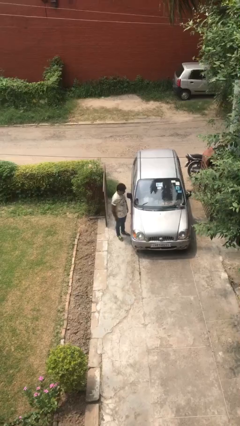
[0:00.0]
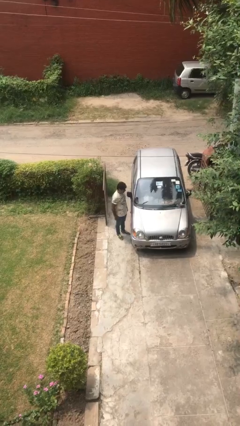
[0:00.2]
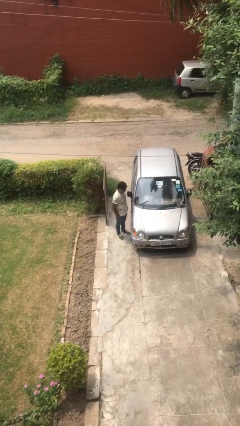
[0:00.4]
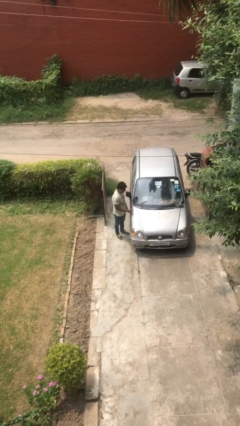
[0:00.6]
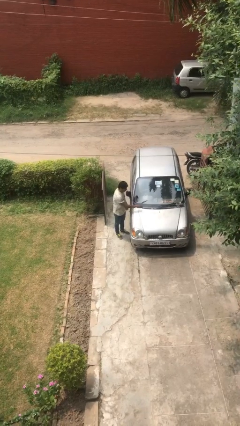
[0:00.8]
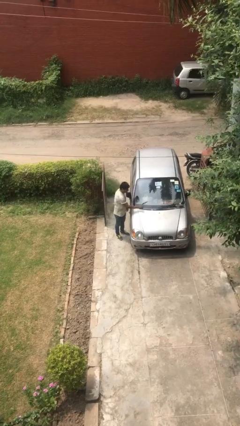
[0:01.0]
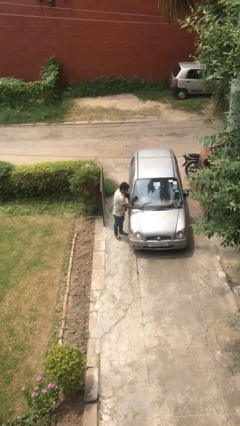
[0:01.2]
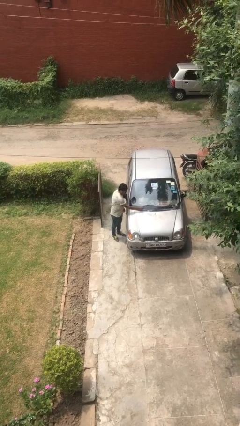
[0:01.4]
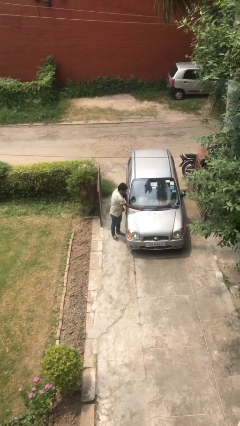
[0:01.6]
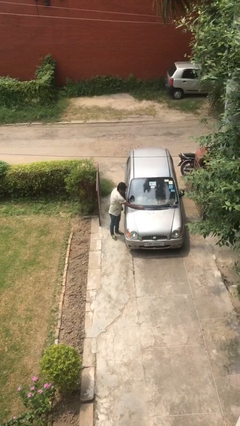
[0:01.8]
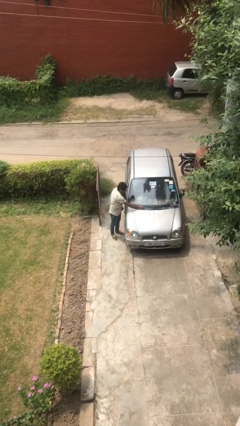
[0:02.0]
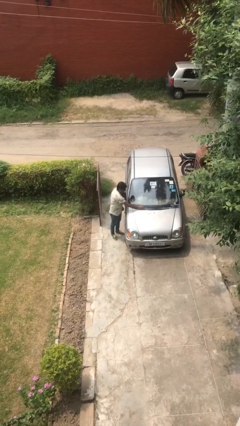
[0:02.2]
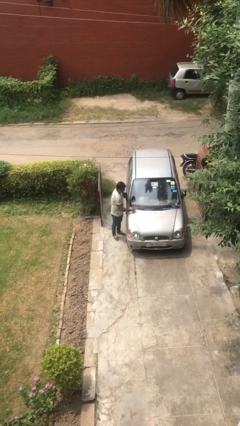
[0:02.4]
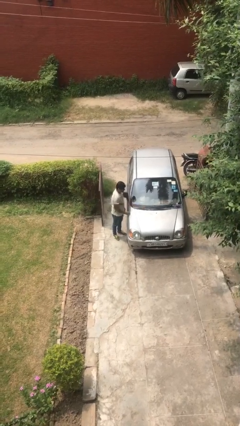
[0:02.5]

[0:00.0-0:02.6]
person flips down car wipers

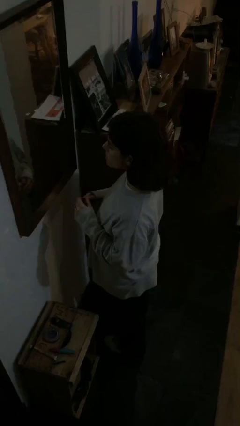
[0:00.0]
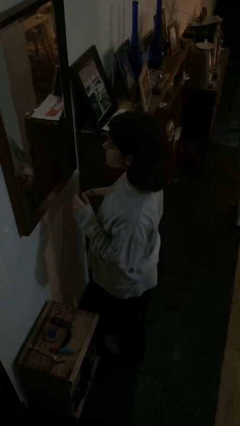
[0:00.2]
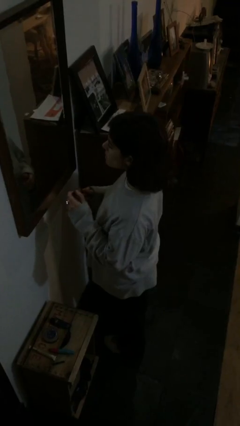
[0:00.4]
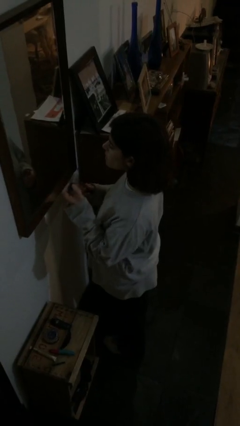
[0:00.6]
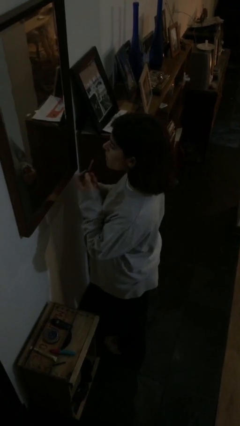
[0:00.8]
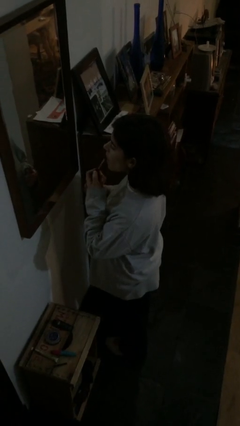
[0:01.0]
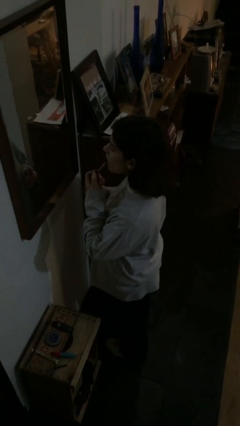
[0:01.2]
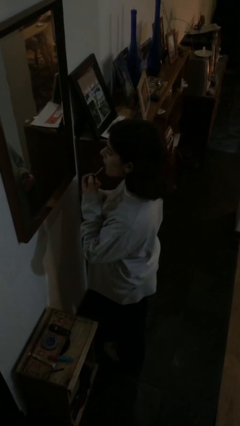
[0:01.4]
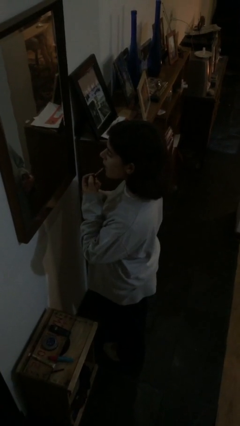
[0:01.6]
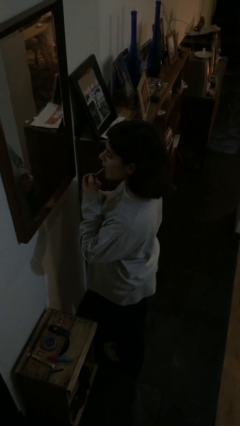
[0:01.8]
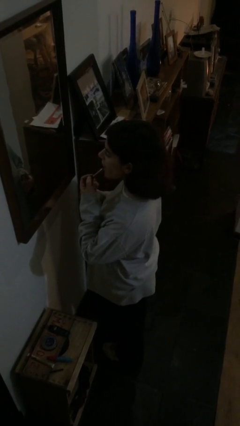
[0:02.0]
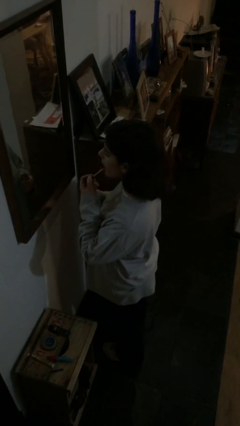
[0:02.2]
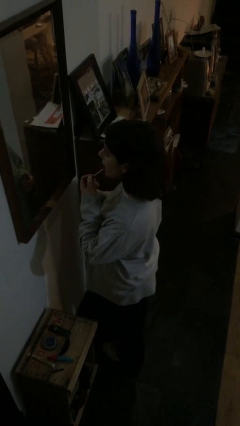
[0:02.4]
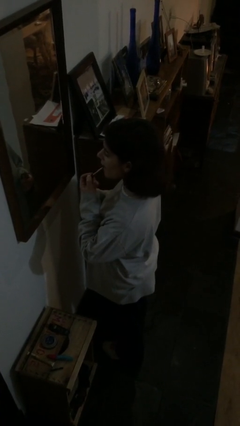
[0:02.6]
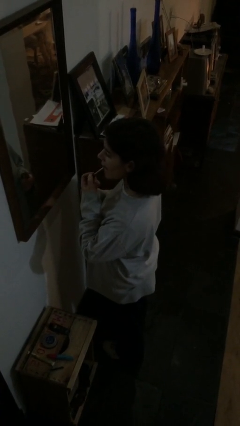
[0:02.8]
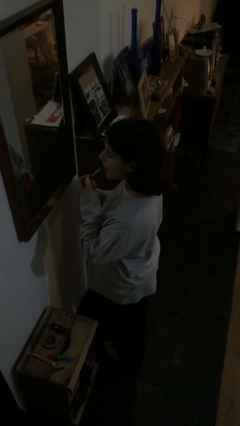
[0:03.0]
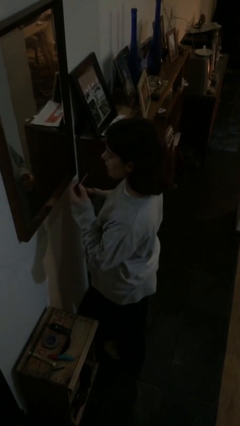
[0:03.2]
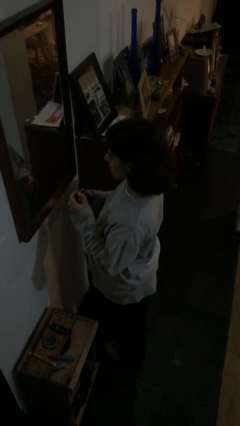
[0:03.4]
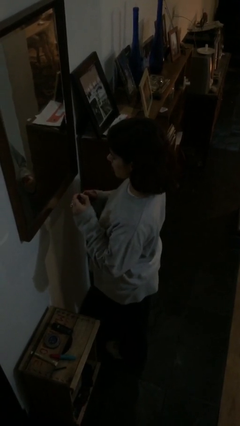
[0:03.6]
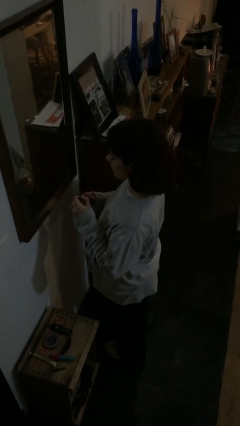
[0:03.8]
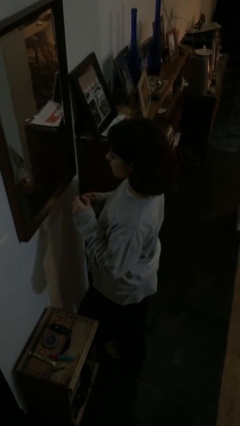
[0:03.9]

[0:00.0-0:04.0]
person applies lip makeup

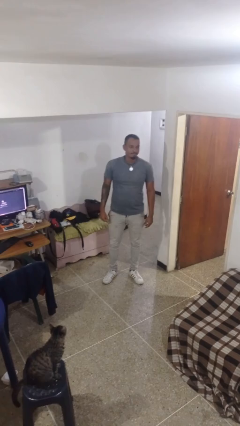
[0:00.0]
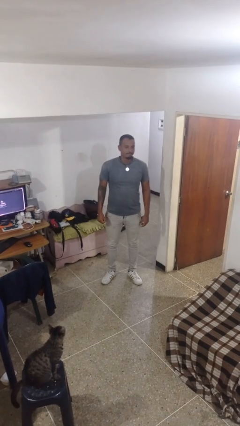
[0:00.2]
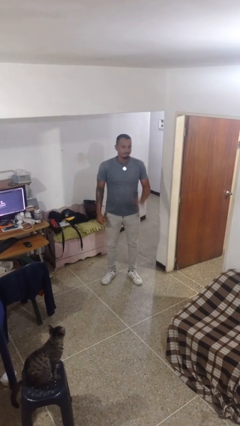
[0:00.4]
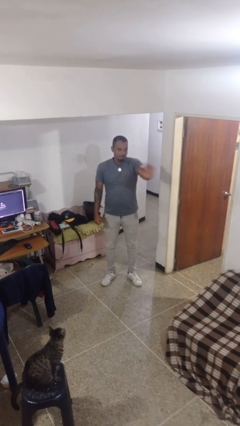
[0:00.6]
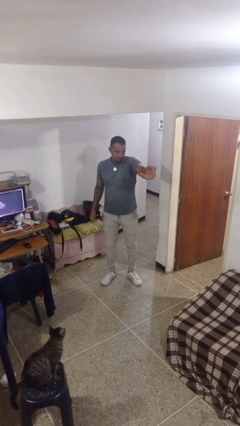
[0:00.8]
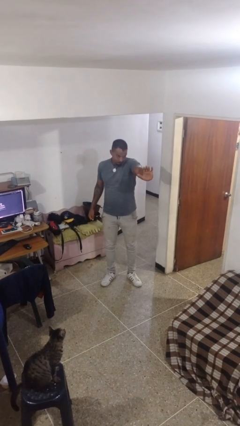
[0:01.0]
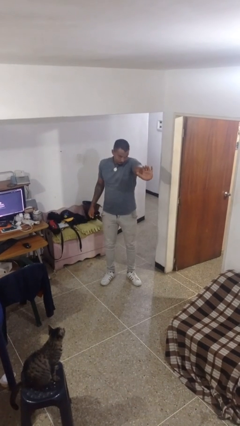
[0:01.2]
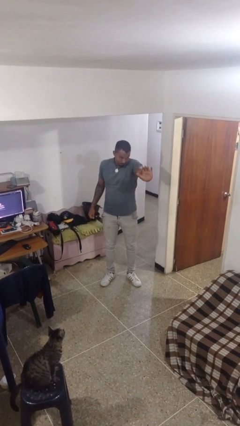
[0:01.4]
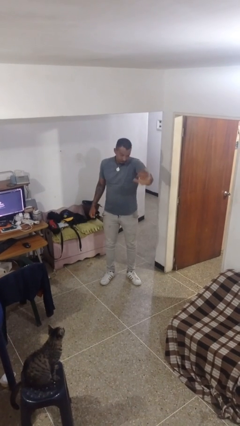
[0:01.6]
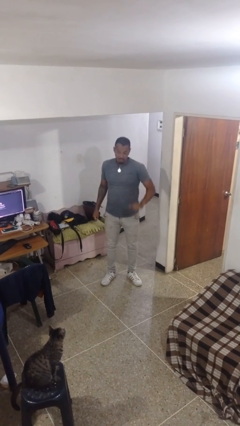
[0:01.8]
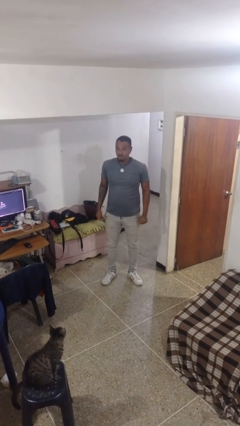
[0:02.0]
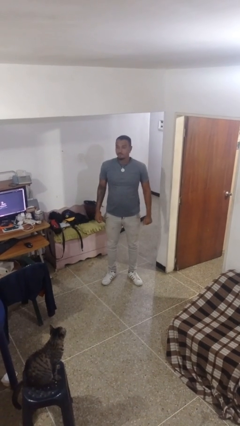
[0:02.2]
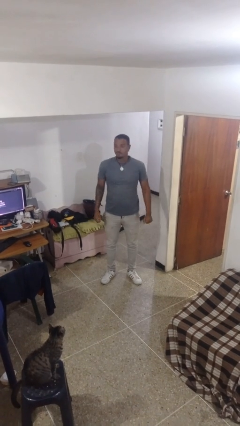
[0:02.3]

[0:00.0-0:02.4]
person gestures stop

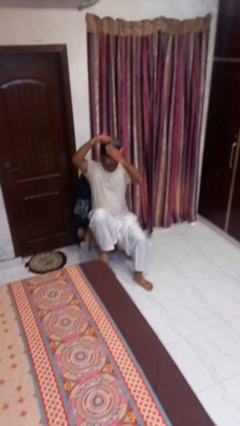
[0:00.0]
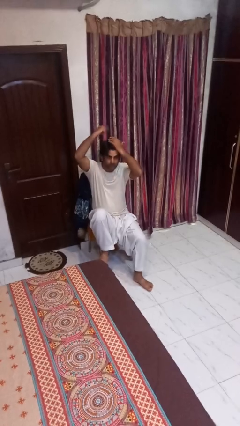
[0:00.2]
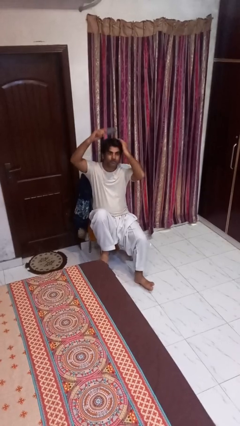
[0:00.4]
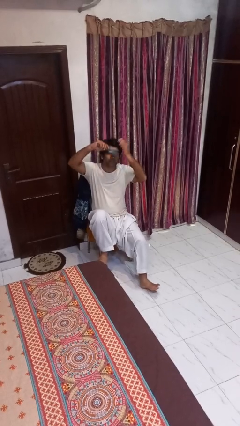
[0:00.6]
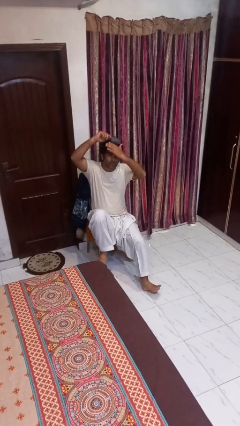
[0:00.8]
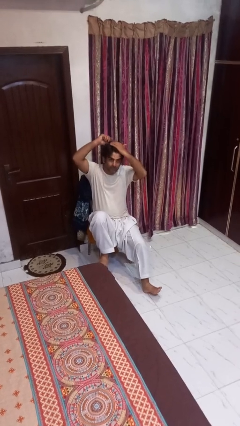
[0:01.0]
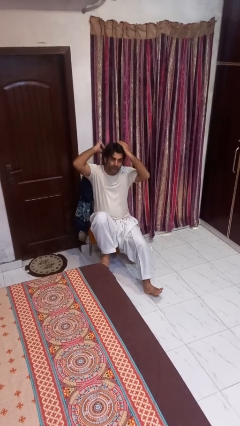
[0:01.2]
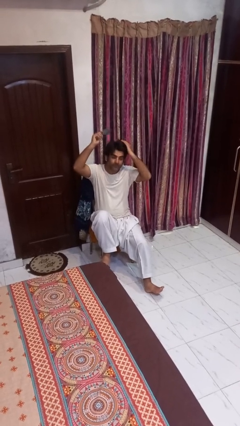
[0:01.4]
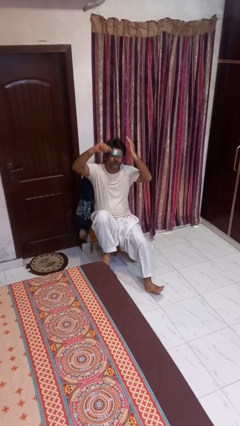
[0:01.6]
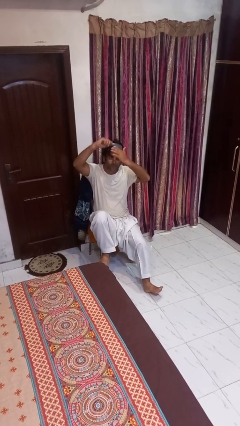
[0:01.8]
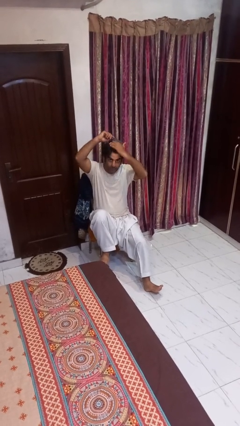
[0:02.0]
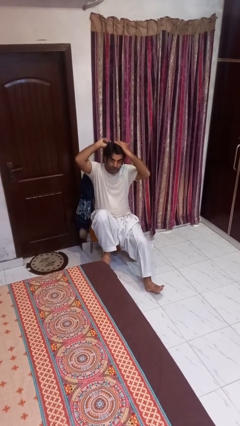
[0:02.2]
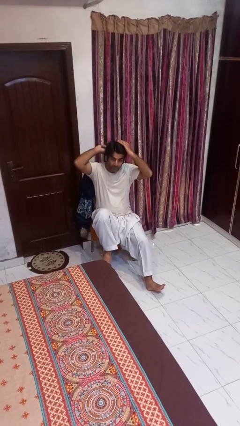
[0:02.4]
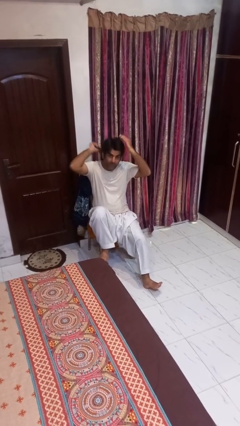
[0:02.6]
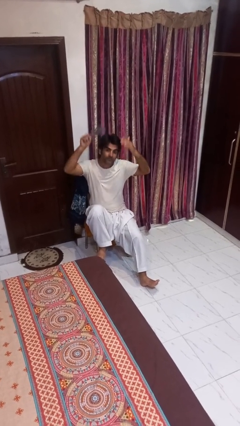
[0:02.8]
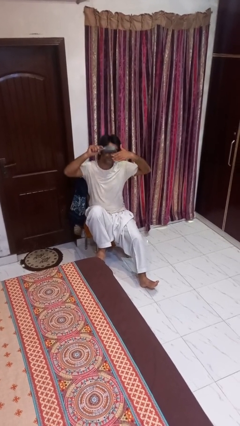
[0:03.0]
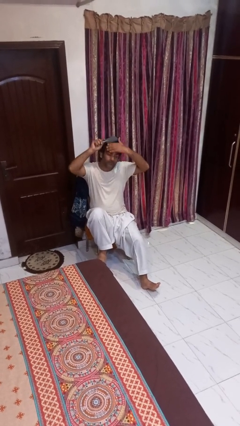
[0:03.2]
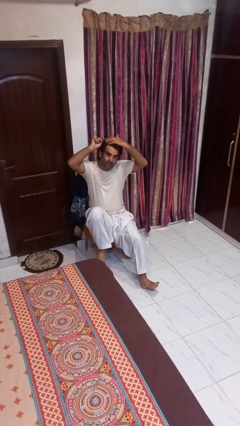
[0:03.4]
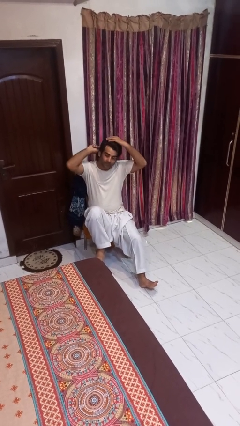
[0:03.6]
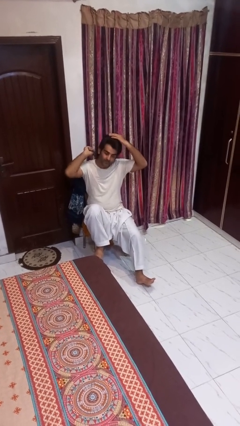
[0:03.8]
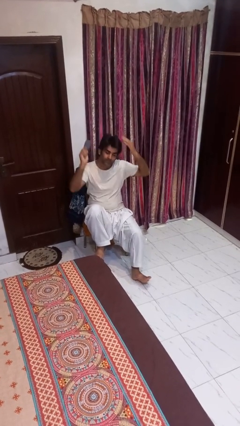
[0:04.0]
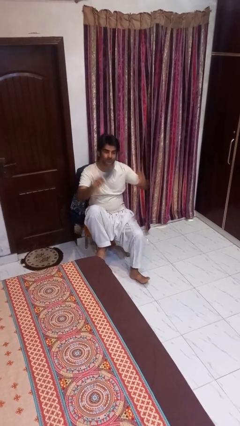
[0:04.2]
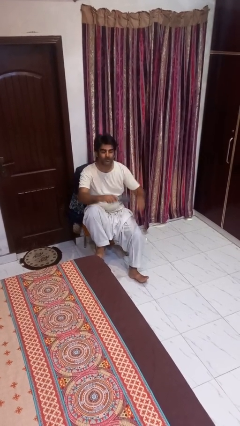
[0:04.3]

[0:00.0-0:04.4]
person brushes hair

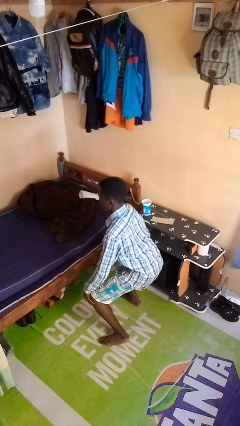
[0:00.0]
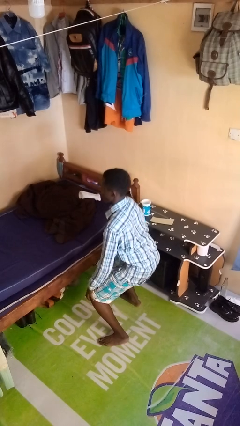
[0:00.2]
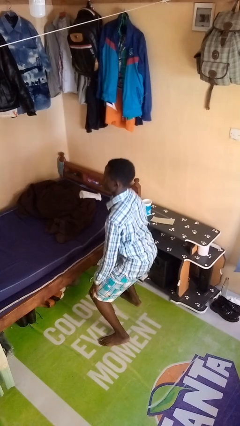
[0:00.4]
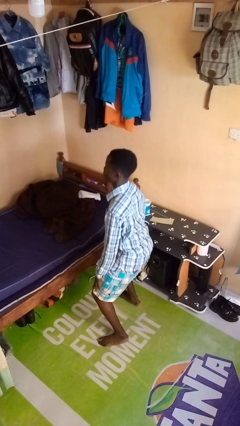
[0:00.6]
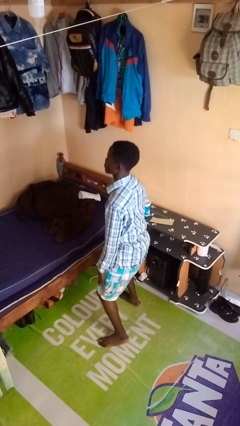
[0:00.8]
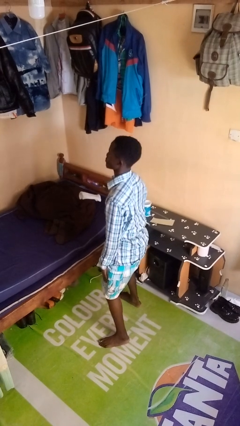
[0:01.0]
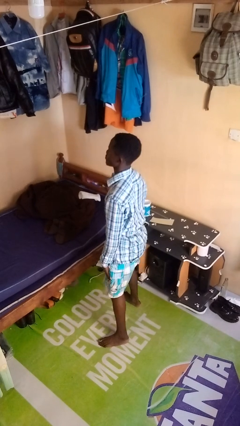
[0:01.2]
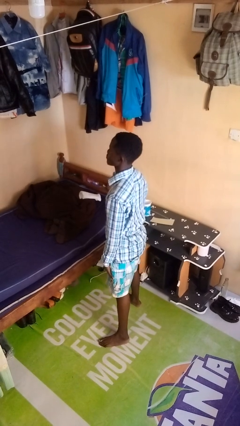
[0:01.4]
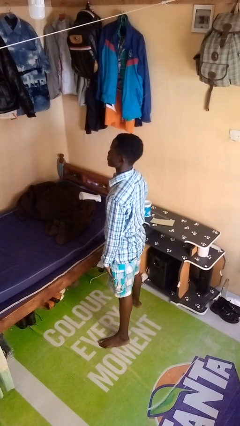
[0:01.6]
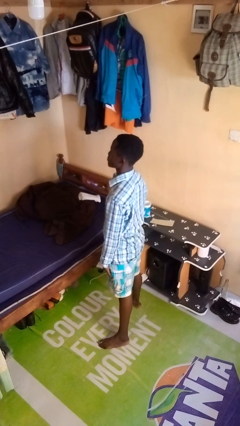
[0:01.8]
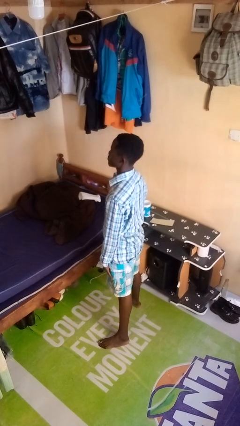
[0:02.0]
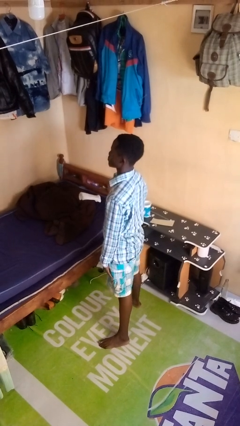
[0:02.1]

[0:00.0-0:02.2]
person stands up

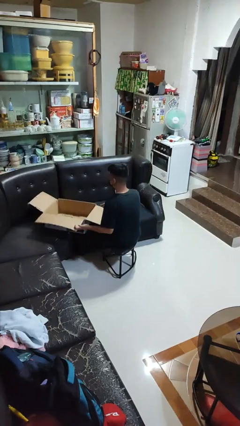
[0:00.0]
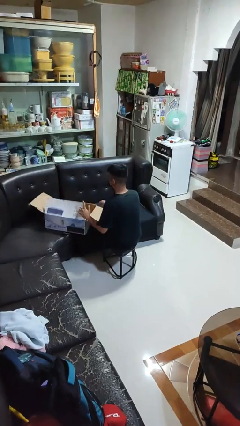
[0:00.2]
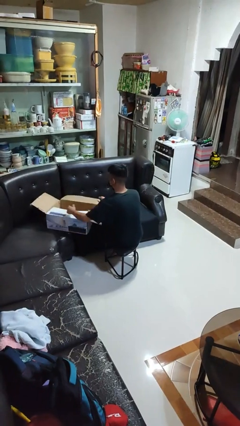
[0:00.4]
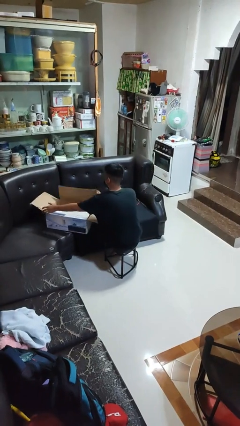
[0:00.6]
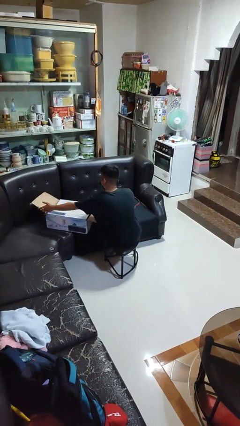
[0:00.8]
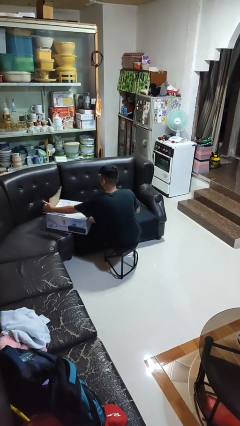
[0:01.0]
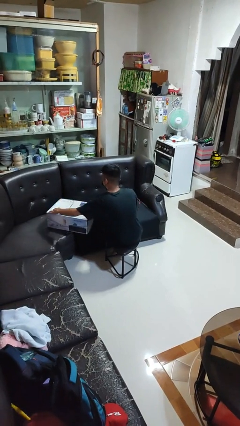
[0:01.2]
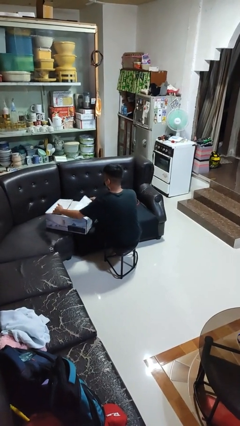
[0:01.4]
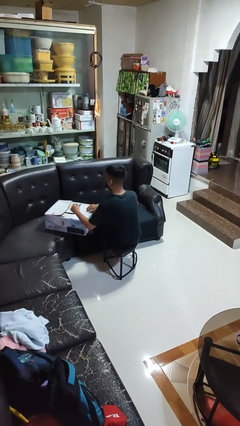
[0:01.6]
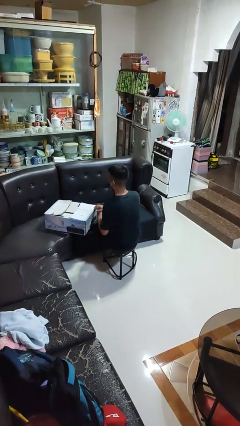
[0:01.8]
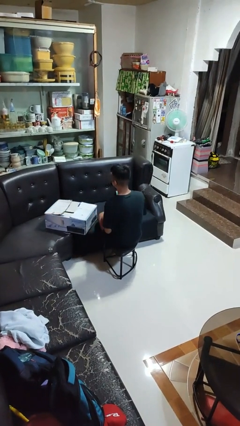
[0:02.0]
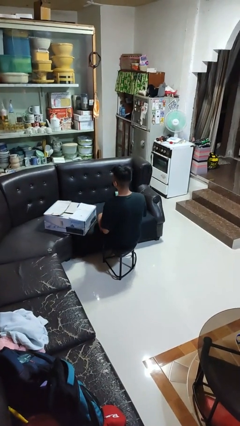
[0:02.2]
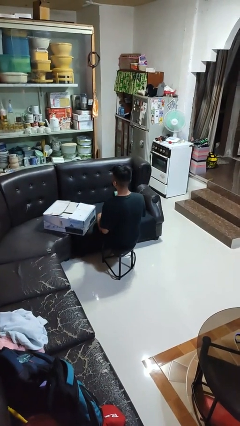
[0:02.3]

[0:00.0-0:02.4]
person closes box
